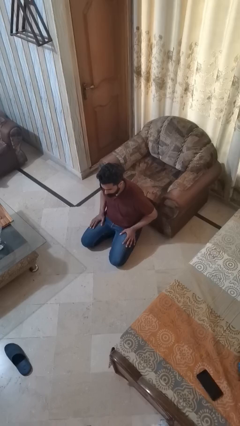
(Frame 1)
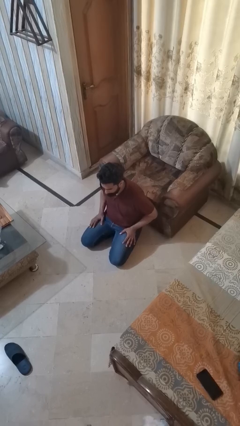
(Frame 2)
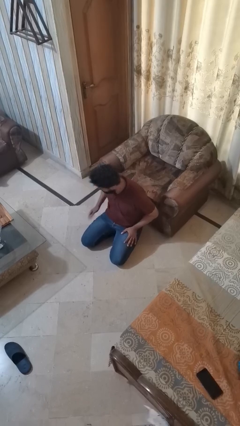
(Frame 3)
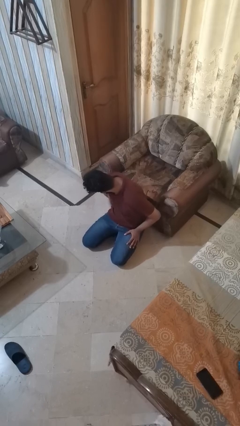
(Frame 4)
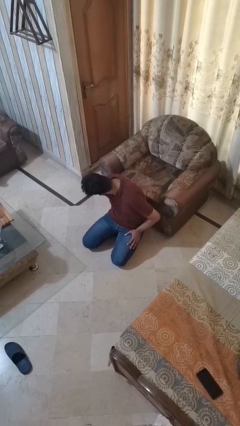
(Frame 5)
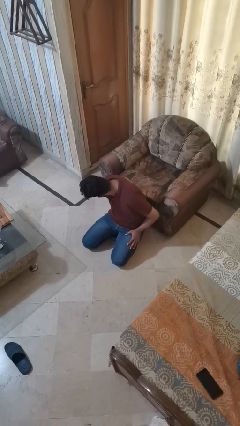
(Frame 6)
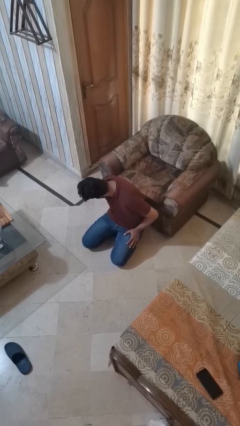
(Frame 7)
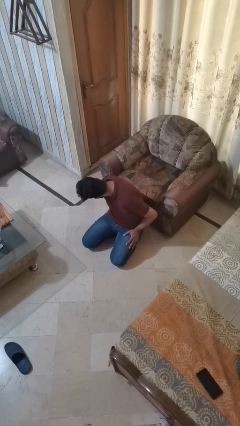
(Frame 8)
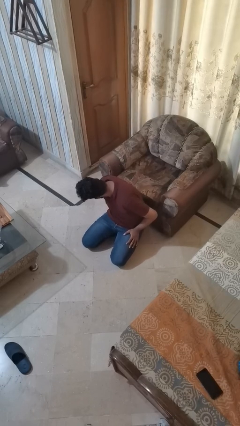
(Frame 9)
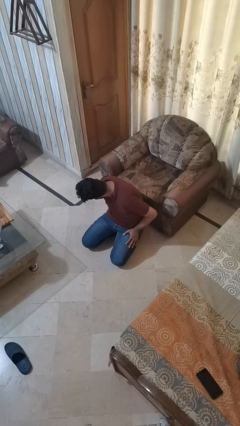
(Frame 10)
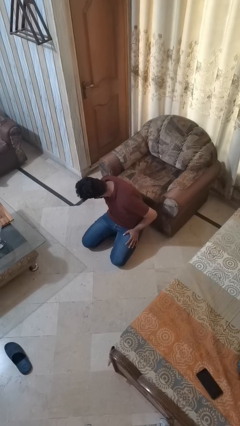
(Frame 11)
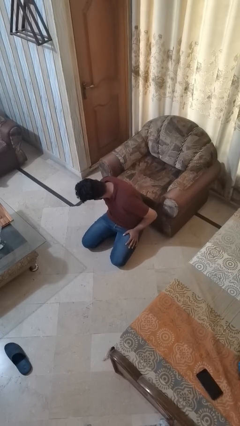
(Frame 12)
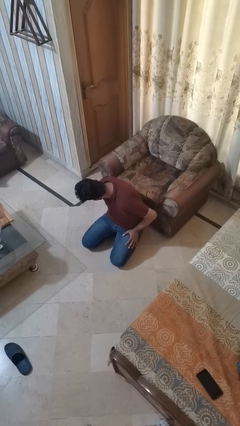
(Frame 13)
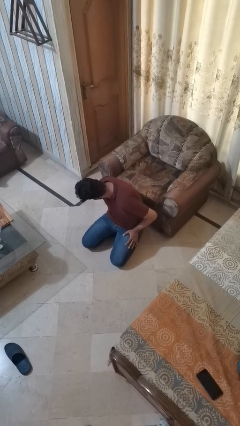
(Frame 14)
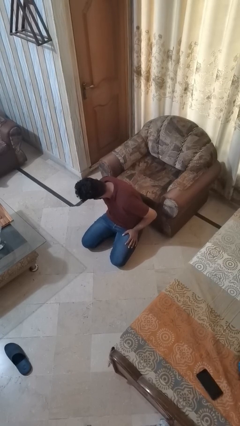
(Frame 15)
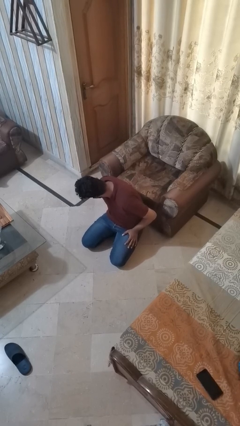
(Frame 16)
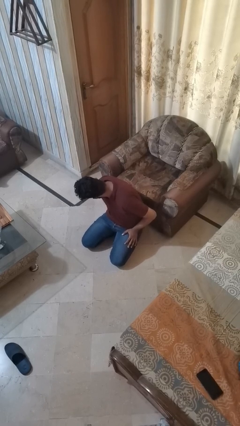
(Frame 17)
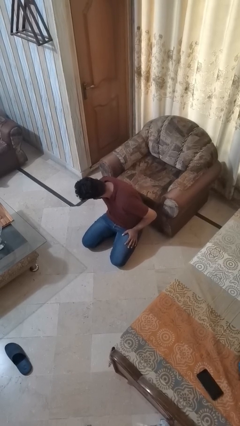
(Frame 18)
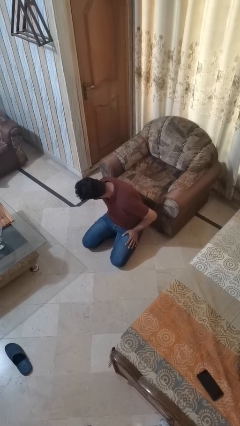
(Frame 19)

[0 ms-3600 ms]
person searches under couch

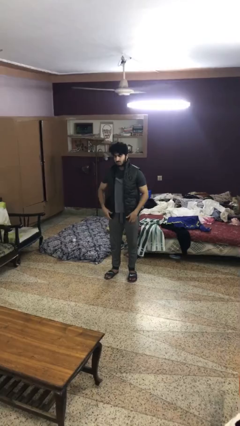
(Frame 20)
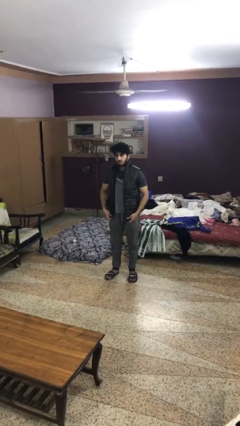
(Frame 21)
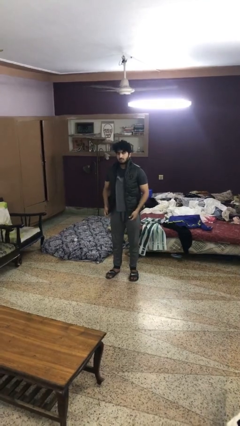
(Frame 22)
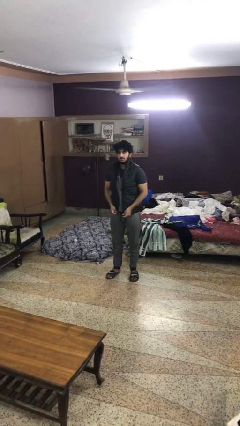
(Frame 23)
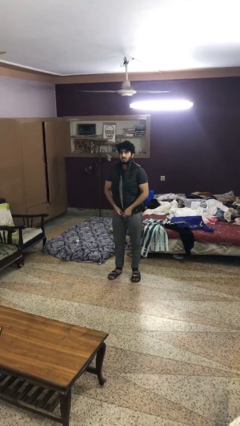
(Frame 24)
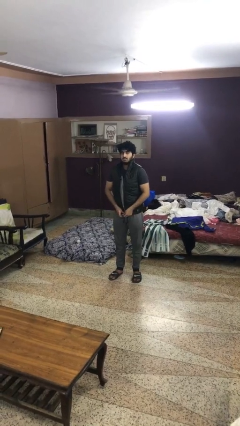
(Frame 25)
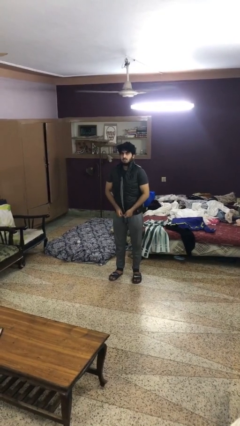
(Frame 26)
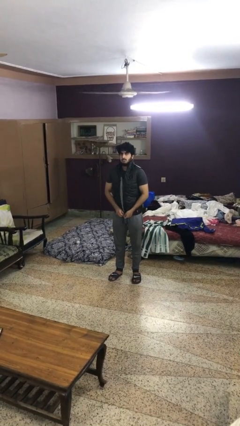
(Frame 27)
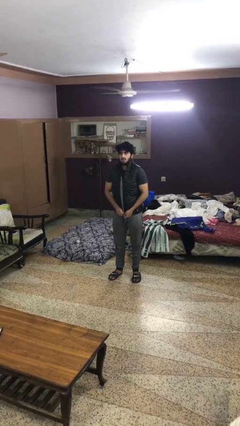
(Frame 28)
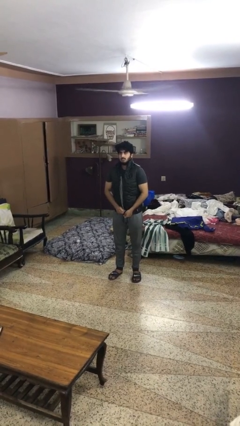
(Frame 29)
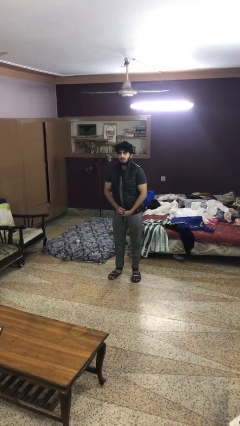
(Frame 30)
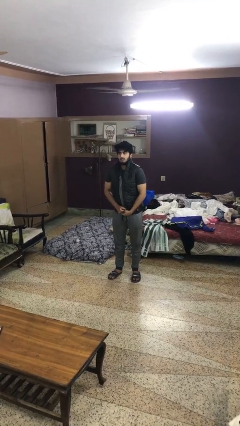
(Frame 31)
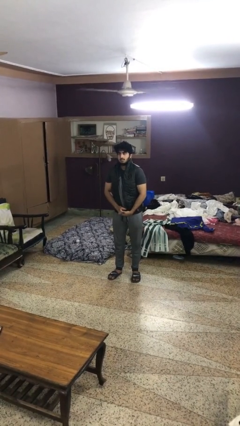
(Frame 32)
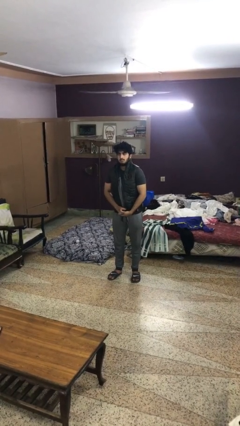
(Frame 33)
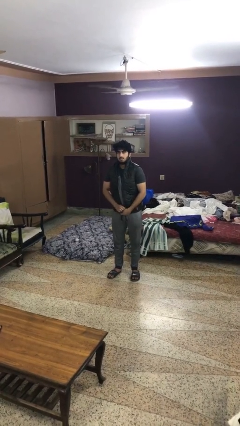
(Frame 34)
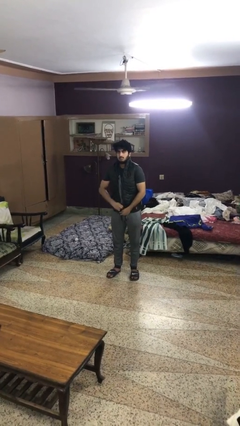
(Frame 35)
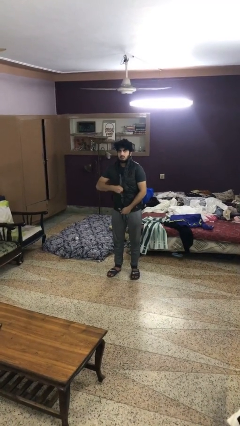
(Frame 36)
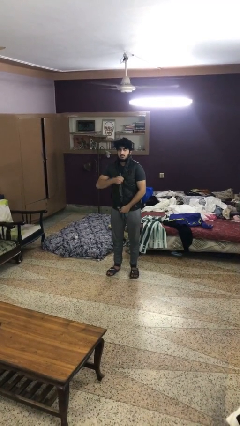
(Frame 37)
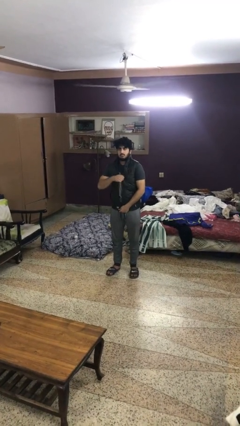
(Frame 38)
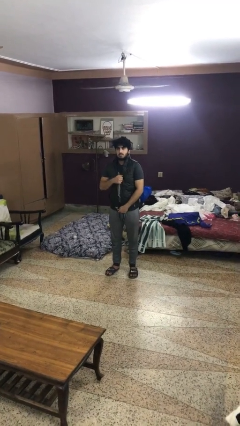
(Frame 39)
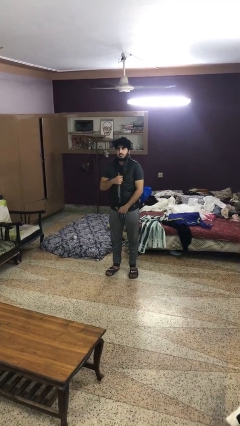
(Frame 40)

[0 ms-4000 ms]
person zips up jacket

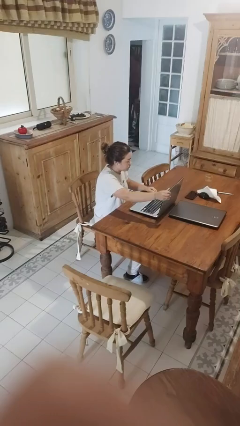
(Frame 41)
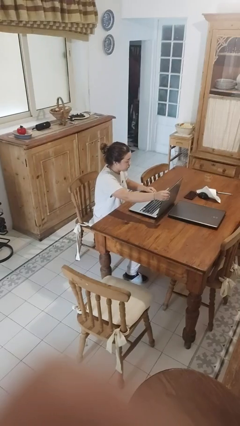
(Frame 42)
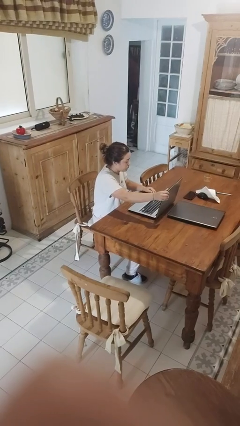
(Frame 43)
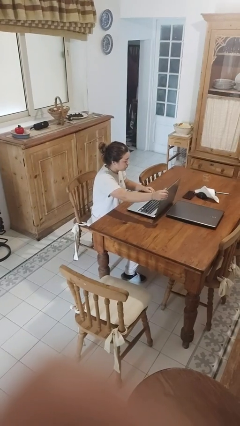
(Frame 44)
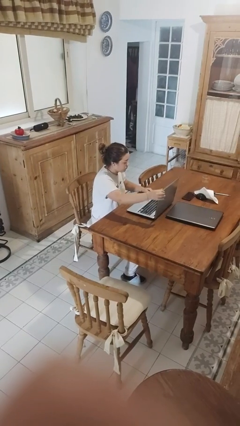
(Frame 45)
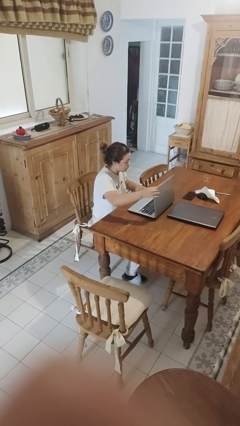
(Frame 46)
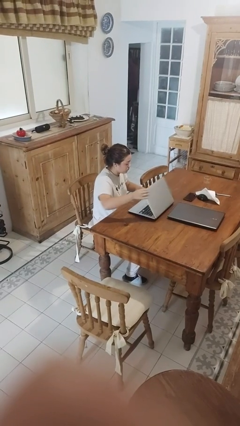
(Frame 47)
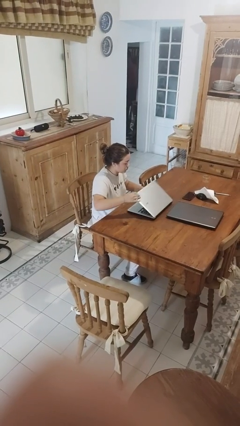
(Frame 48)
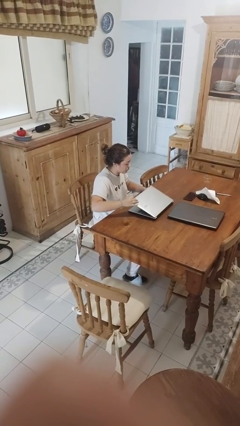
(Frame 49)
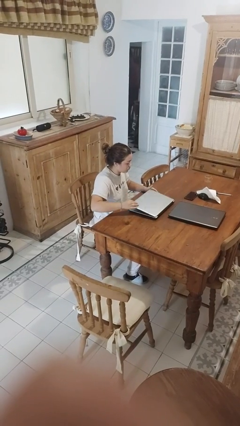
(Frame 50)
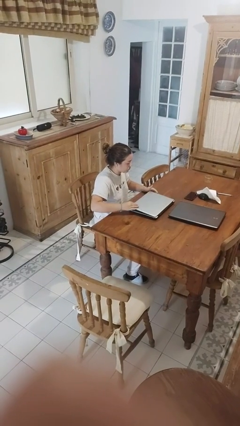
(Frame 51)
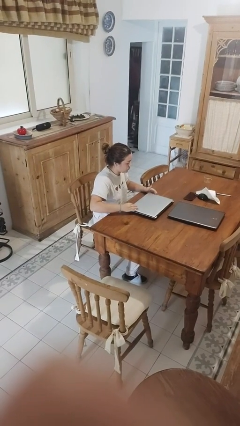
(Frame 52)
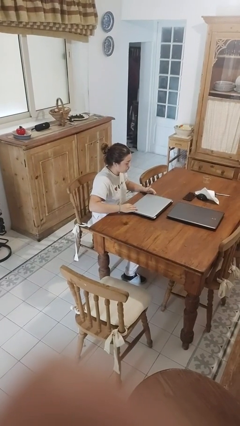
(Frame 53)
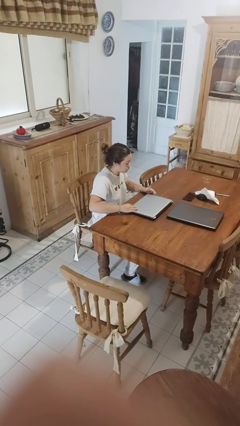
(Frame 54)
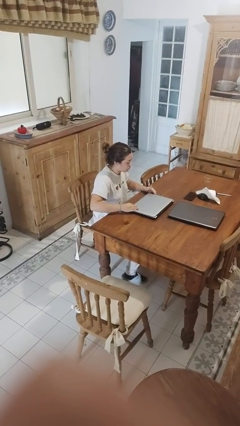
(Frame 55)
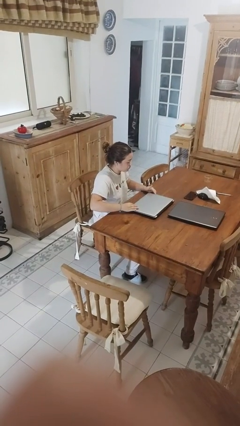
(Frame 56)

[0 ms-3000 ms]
person closes laptop

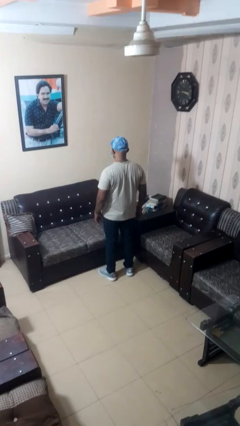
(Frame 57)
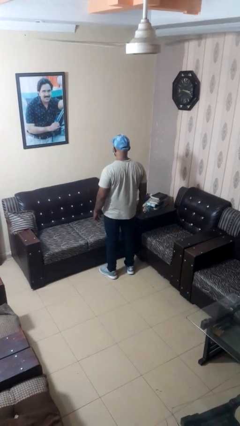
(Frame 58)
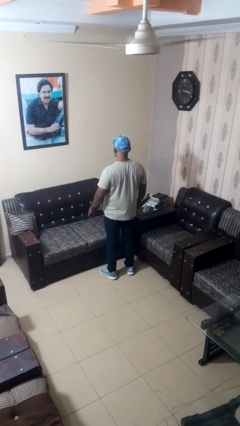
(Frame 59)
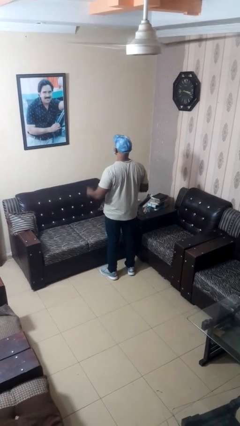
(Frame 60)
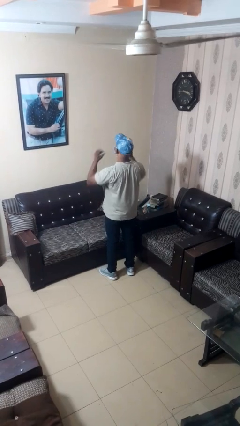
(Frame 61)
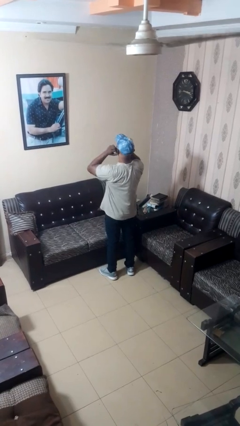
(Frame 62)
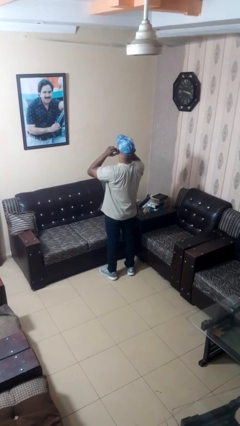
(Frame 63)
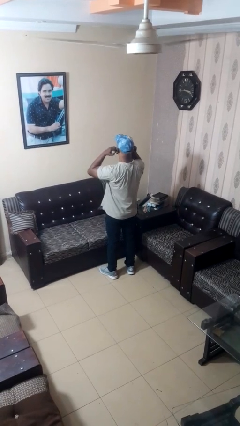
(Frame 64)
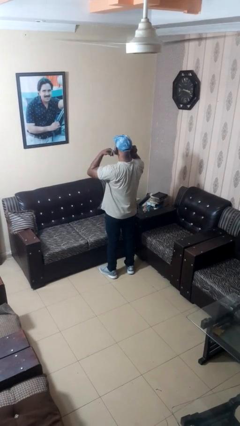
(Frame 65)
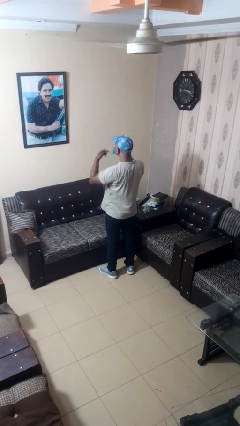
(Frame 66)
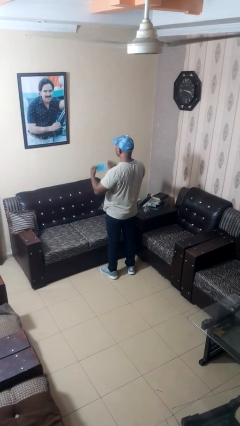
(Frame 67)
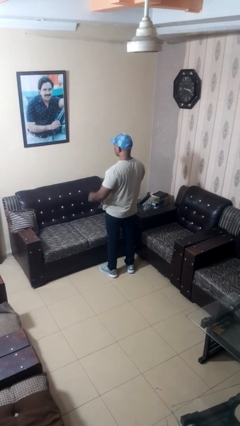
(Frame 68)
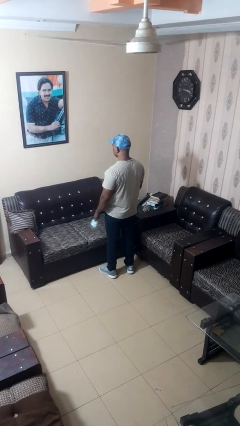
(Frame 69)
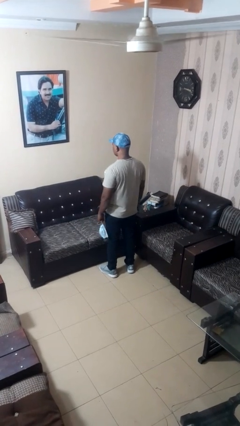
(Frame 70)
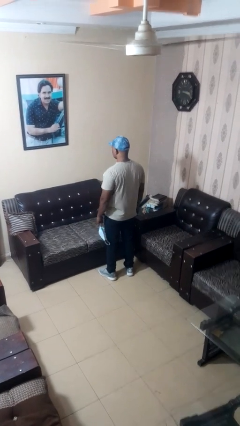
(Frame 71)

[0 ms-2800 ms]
person takes off facemask

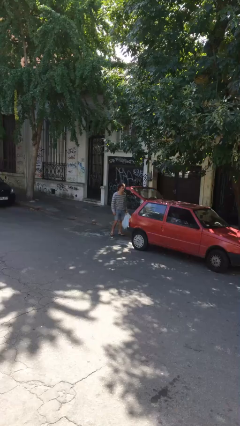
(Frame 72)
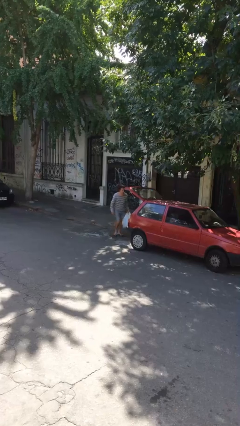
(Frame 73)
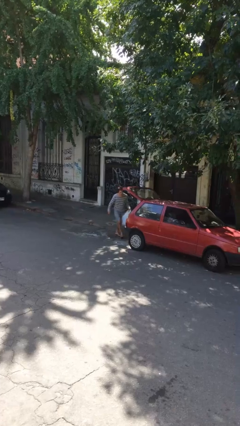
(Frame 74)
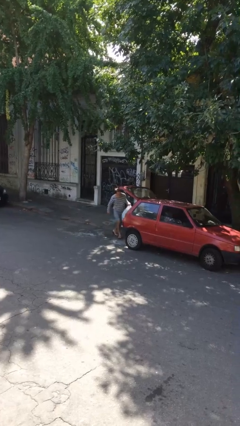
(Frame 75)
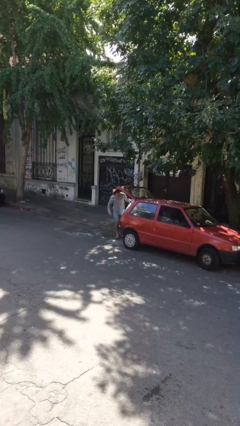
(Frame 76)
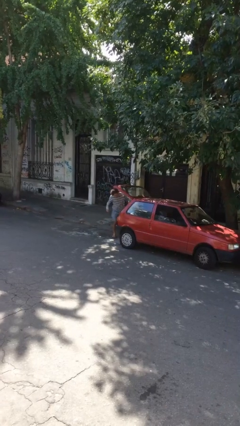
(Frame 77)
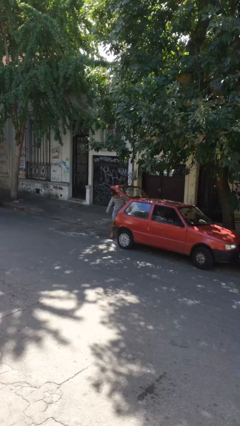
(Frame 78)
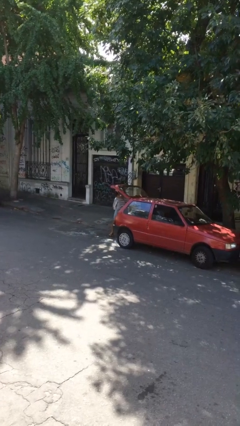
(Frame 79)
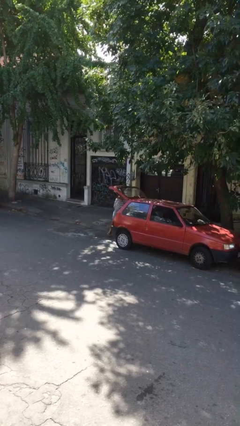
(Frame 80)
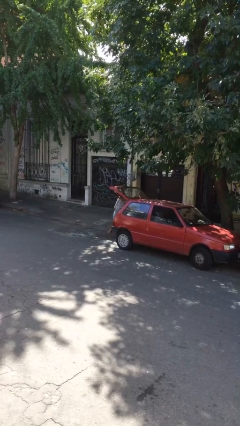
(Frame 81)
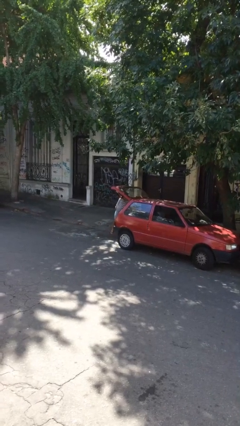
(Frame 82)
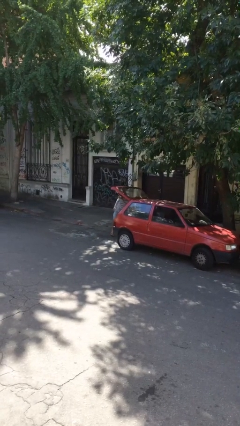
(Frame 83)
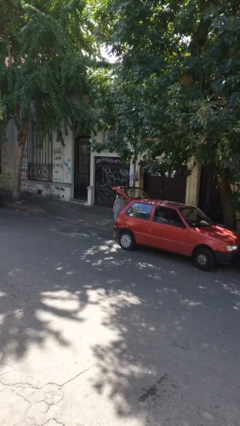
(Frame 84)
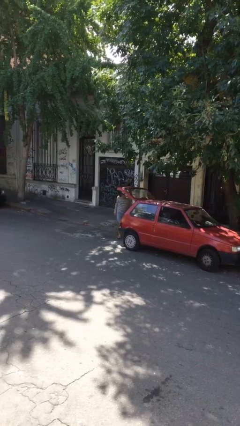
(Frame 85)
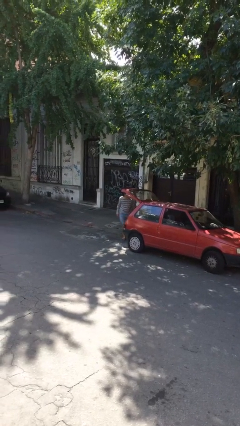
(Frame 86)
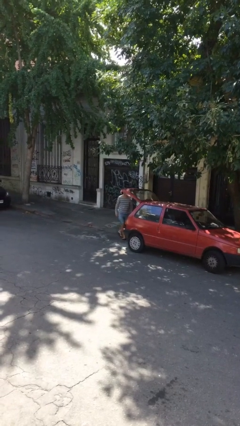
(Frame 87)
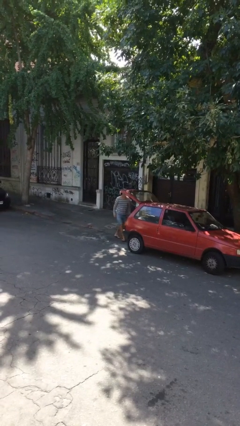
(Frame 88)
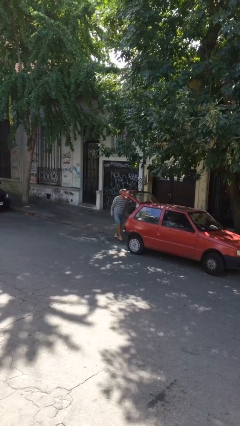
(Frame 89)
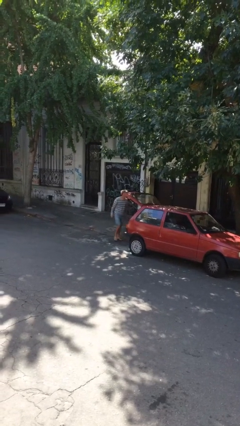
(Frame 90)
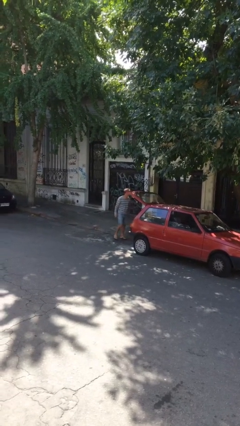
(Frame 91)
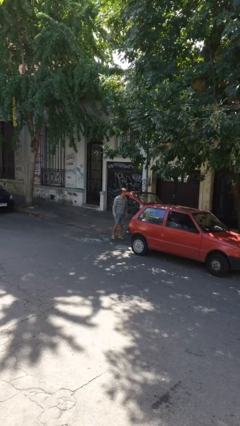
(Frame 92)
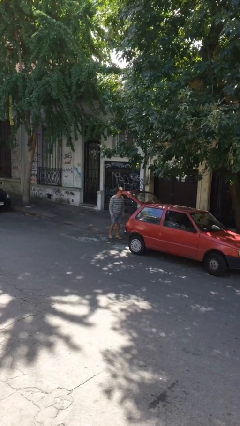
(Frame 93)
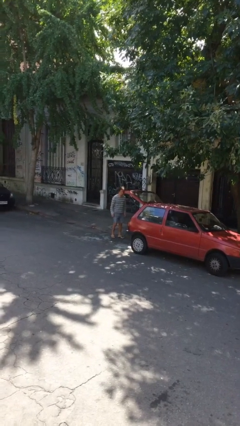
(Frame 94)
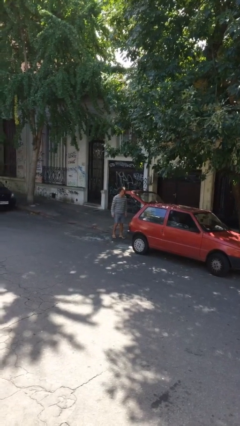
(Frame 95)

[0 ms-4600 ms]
person loads car
